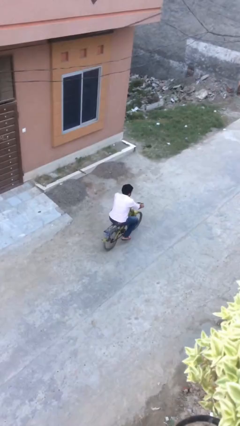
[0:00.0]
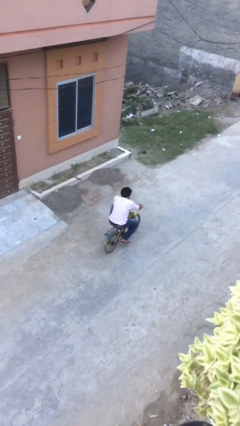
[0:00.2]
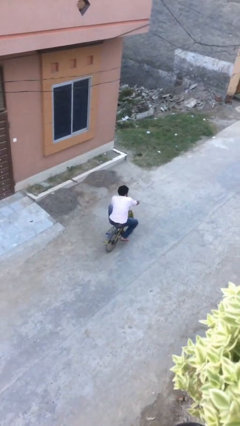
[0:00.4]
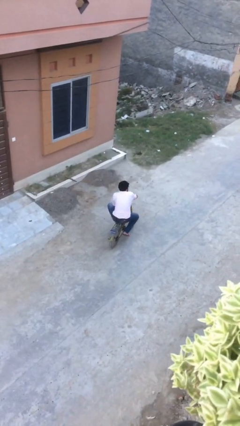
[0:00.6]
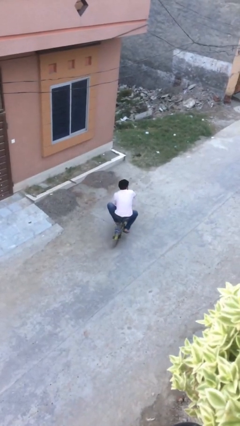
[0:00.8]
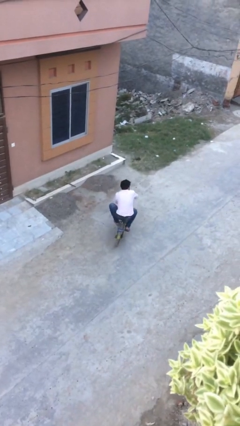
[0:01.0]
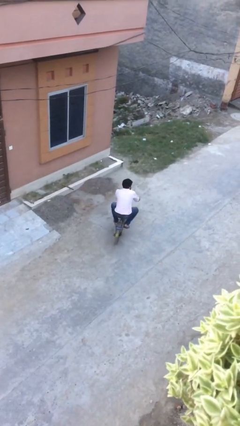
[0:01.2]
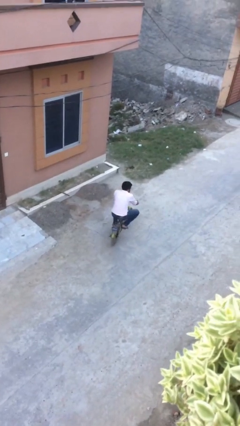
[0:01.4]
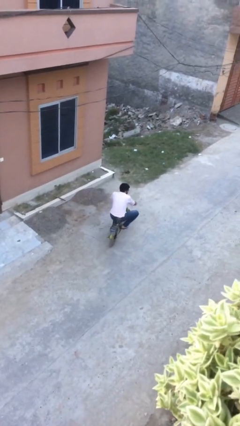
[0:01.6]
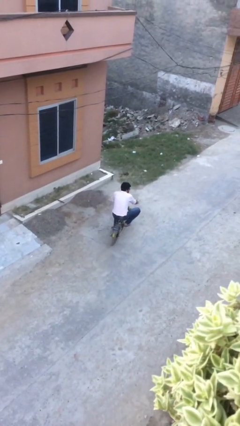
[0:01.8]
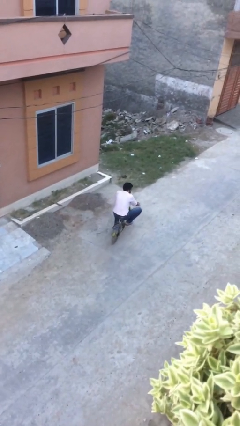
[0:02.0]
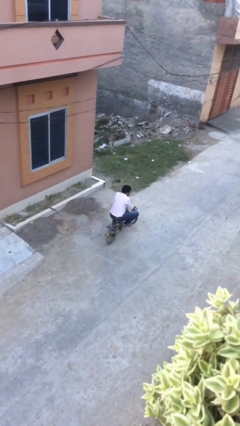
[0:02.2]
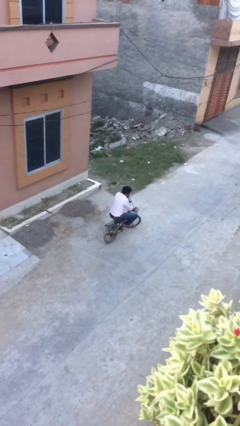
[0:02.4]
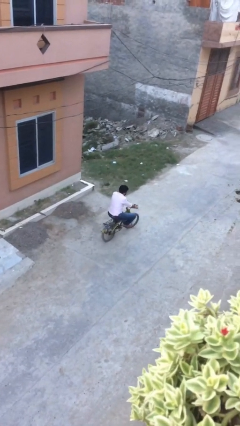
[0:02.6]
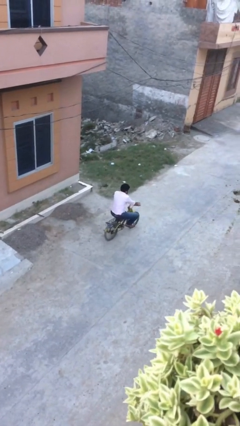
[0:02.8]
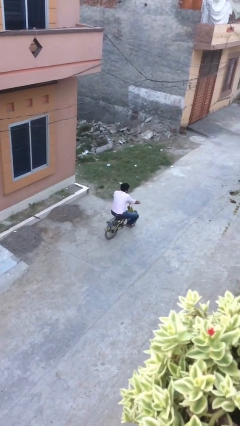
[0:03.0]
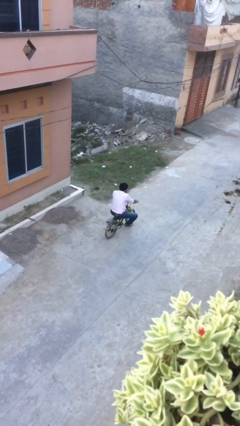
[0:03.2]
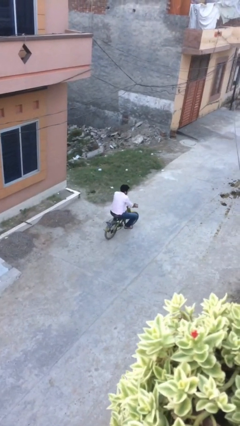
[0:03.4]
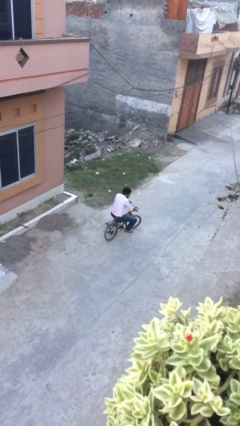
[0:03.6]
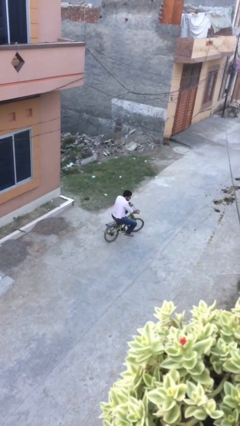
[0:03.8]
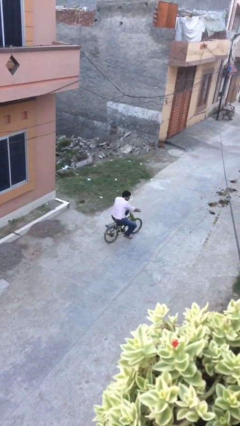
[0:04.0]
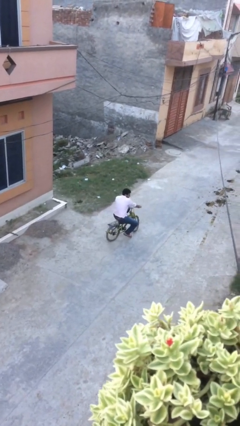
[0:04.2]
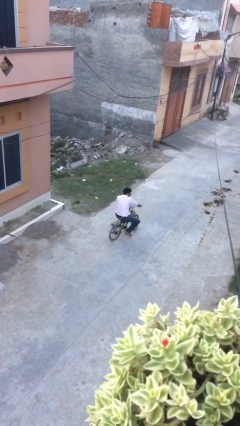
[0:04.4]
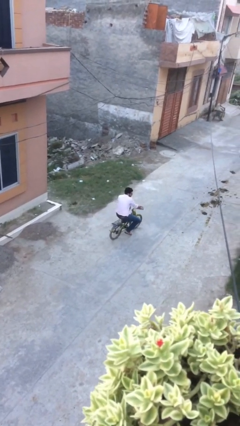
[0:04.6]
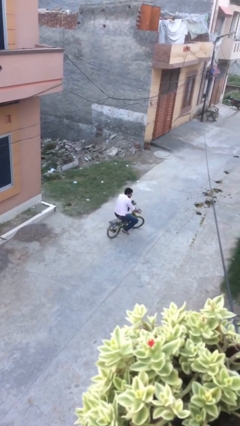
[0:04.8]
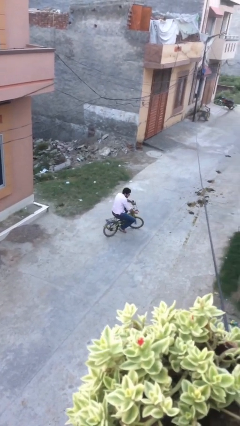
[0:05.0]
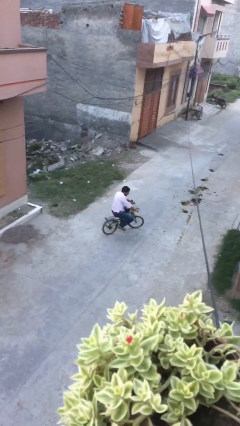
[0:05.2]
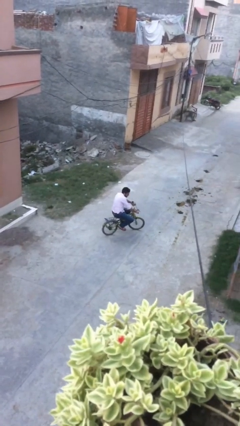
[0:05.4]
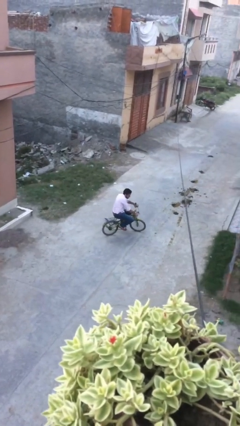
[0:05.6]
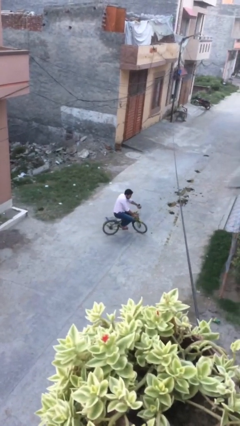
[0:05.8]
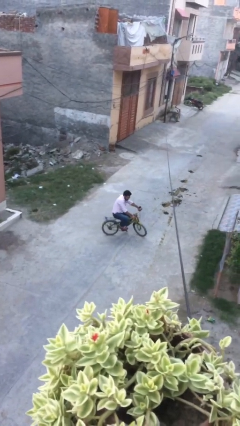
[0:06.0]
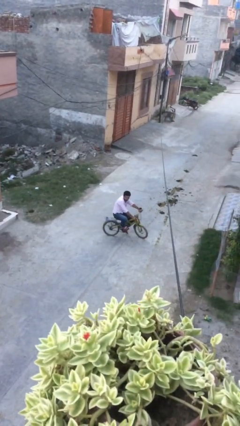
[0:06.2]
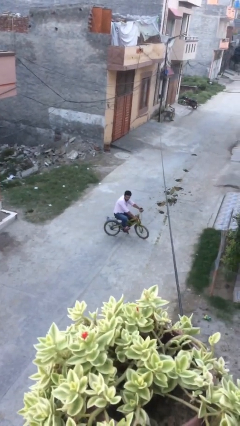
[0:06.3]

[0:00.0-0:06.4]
person rides bicycle

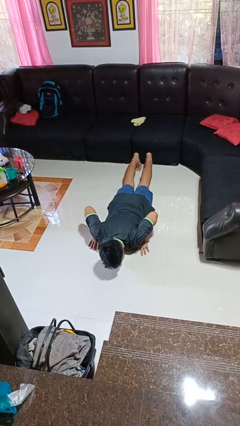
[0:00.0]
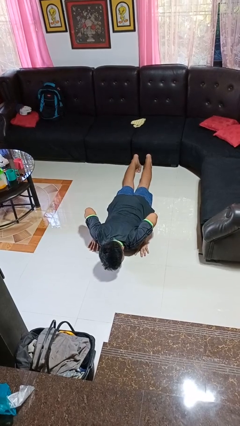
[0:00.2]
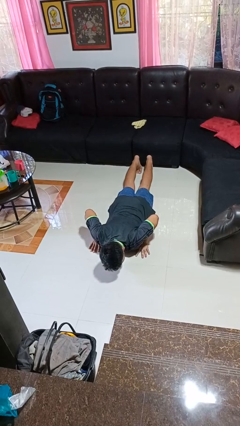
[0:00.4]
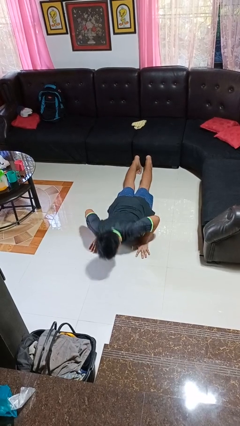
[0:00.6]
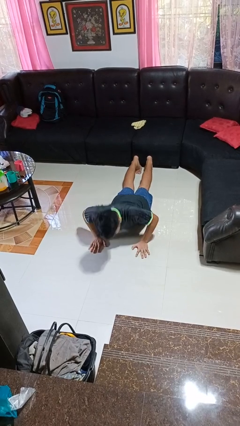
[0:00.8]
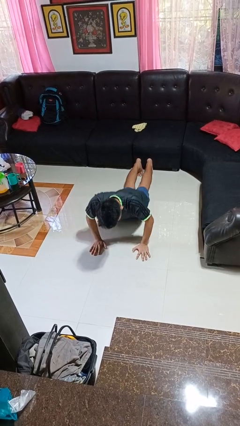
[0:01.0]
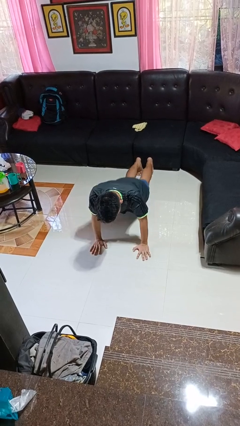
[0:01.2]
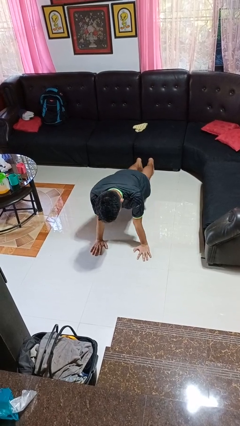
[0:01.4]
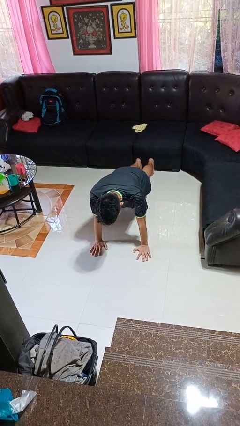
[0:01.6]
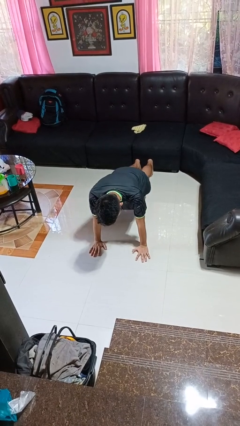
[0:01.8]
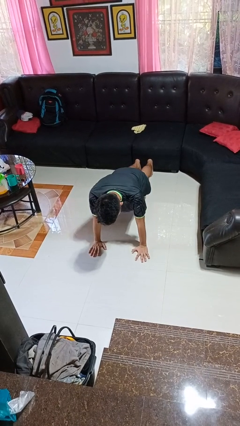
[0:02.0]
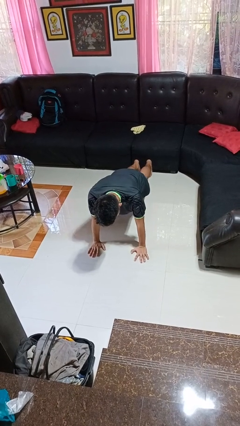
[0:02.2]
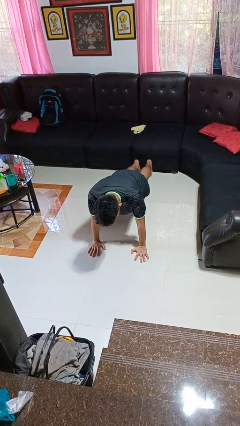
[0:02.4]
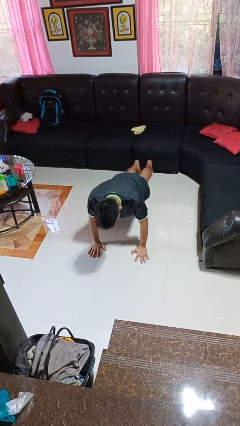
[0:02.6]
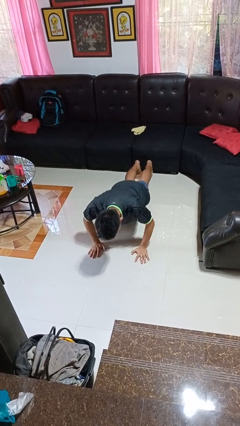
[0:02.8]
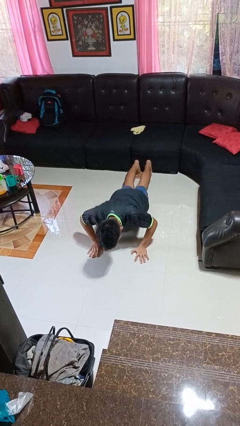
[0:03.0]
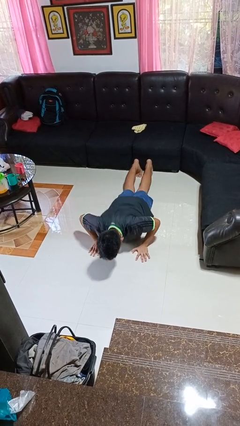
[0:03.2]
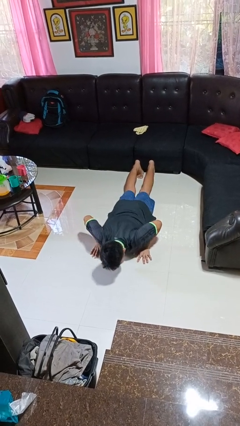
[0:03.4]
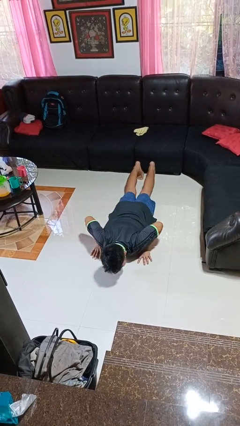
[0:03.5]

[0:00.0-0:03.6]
person exercises with pushup

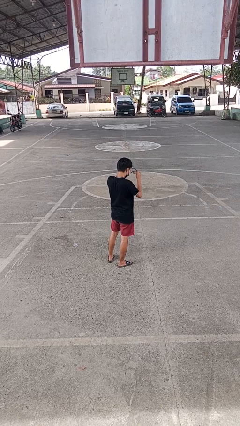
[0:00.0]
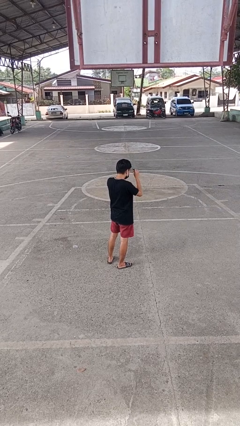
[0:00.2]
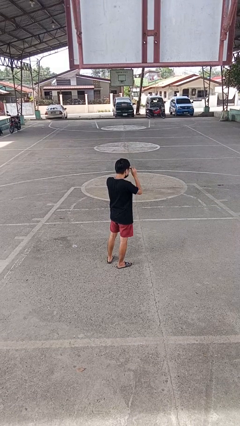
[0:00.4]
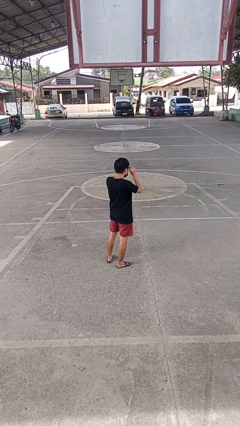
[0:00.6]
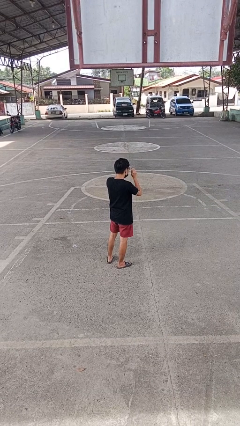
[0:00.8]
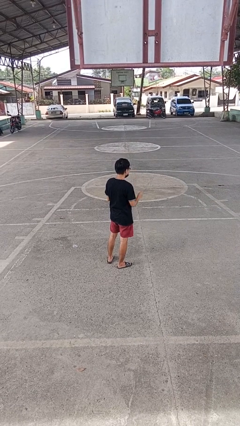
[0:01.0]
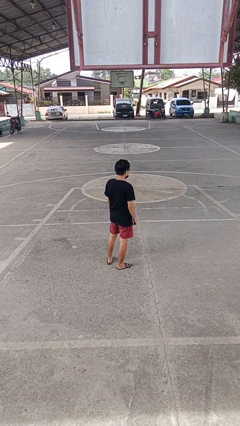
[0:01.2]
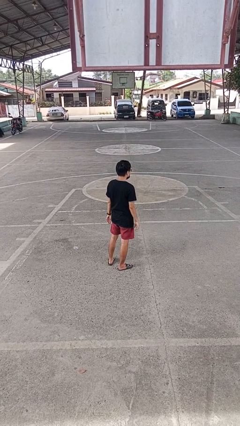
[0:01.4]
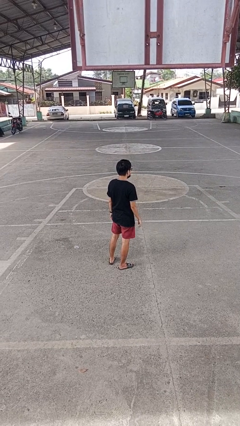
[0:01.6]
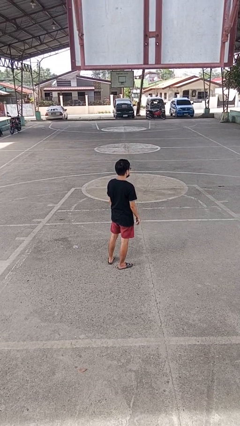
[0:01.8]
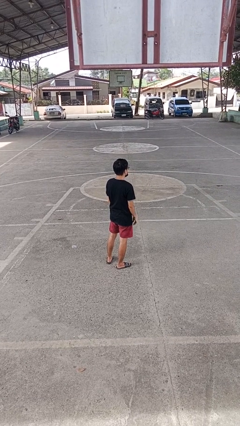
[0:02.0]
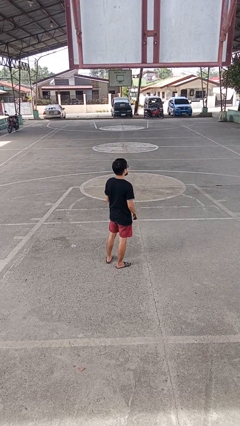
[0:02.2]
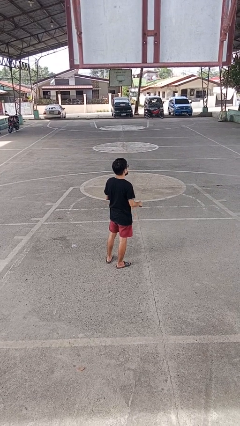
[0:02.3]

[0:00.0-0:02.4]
person puts on glasses

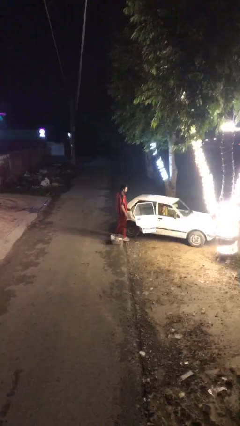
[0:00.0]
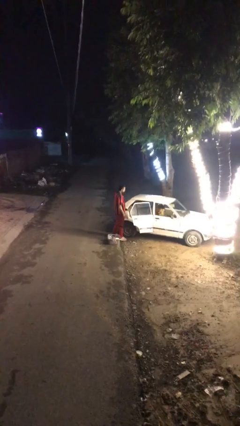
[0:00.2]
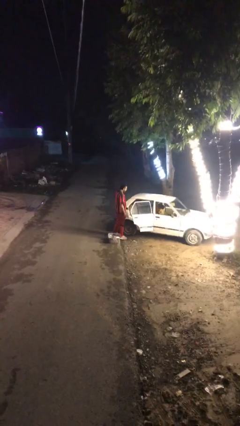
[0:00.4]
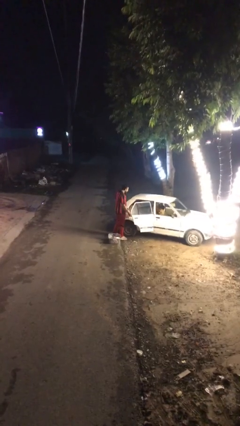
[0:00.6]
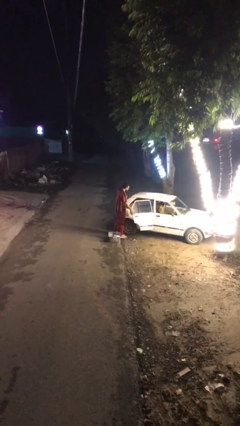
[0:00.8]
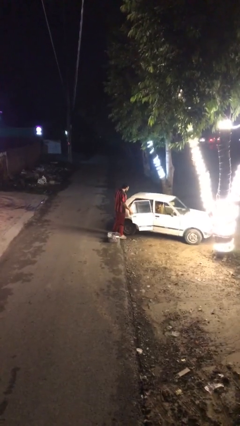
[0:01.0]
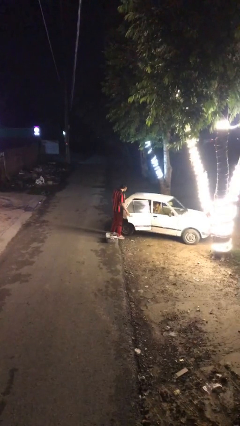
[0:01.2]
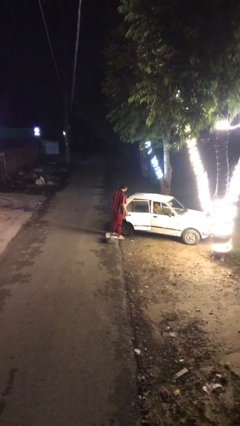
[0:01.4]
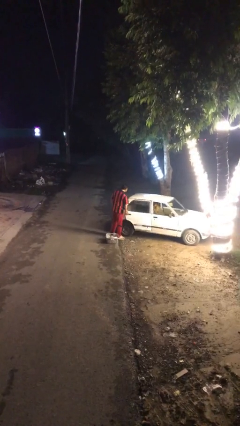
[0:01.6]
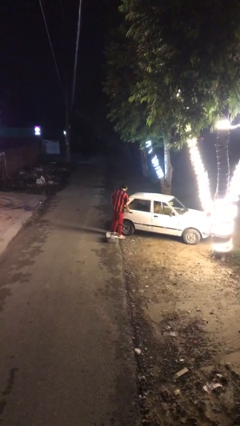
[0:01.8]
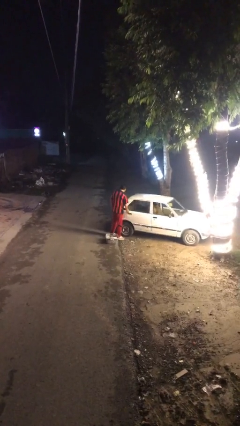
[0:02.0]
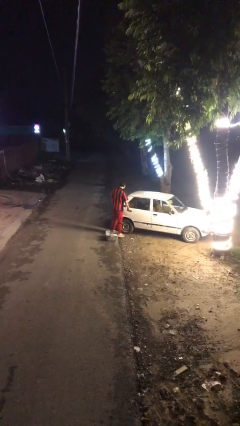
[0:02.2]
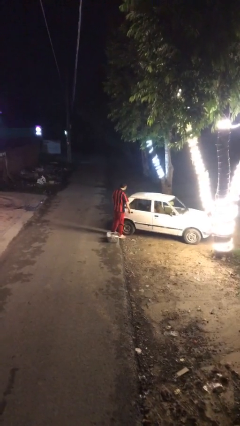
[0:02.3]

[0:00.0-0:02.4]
person closes car door

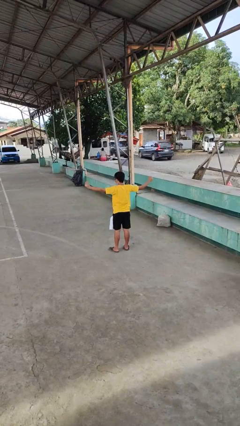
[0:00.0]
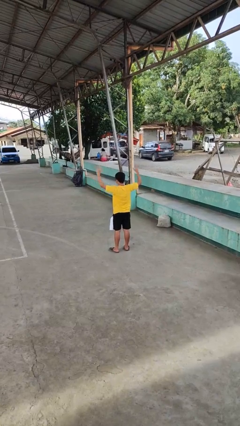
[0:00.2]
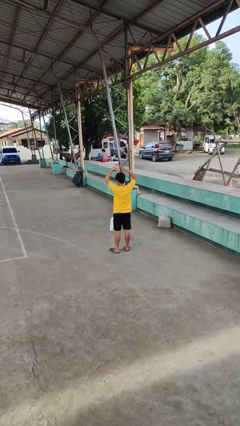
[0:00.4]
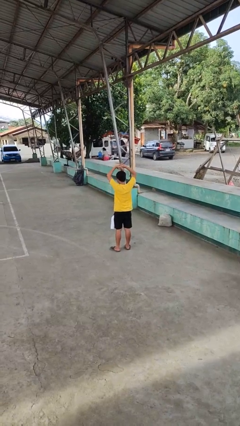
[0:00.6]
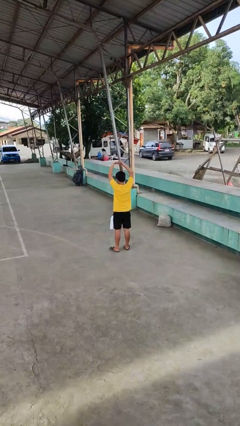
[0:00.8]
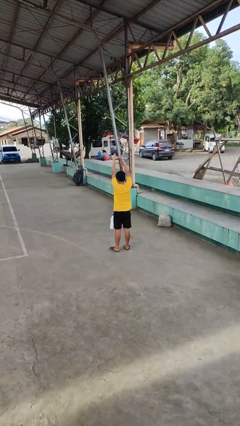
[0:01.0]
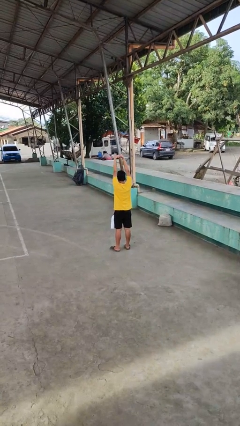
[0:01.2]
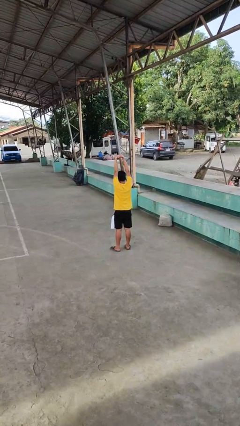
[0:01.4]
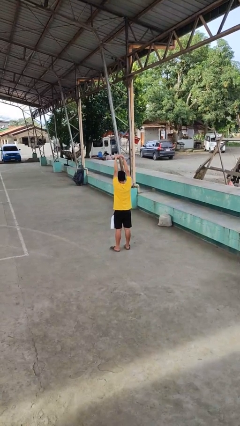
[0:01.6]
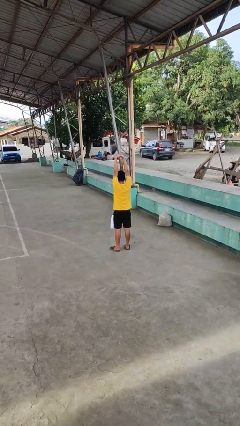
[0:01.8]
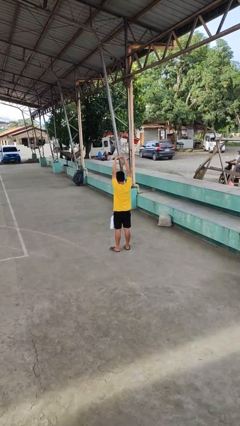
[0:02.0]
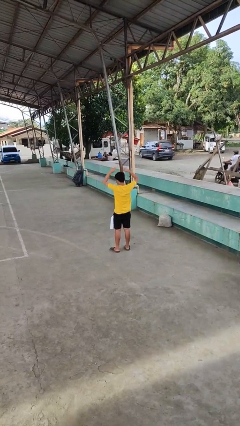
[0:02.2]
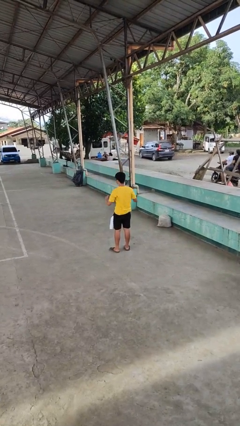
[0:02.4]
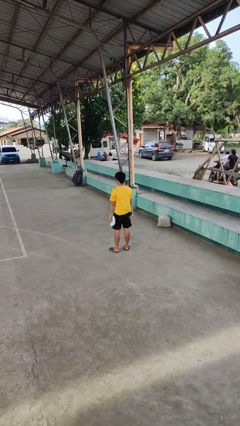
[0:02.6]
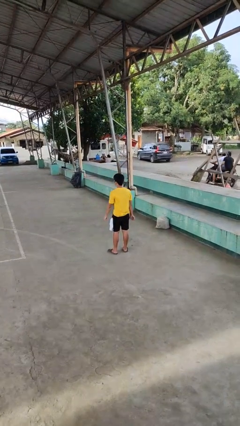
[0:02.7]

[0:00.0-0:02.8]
person stretches arms over head

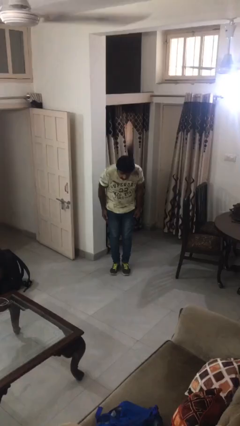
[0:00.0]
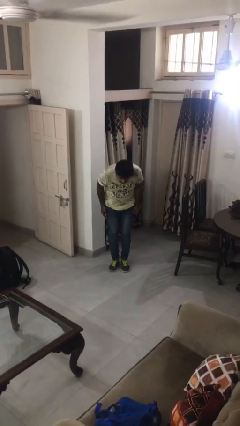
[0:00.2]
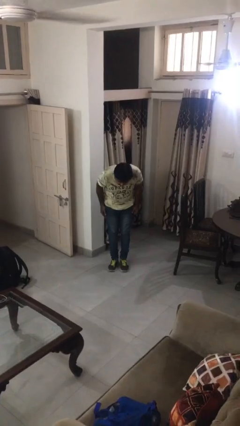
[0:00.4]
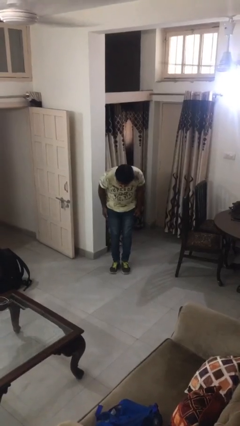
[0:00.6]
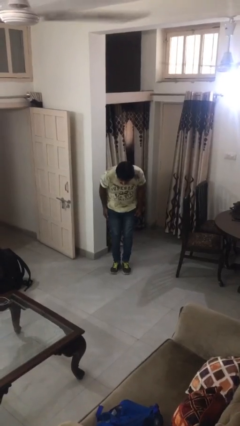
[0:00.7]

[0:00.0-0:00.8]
person bows
